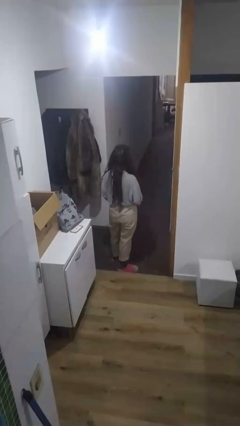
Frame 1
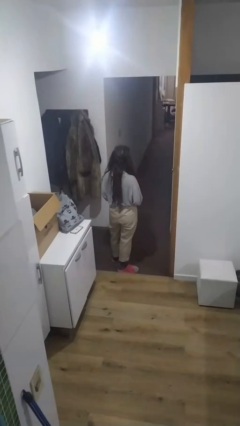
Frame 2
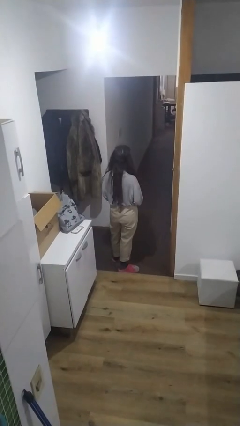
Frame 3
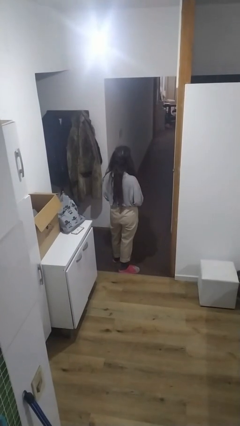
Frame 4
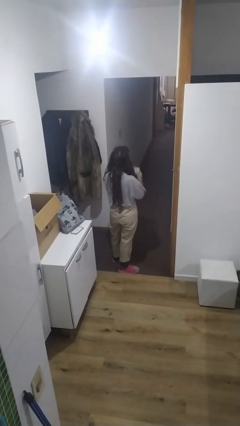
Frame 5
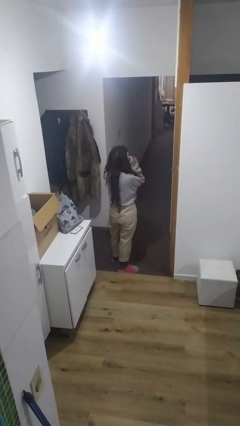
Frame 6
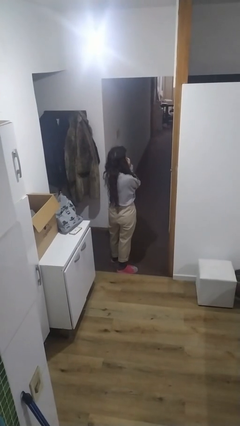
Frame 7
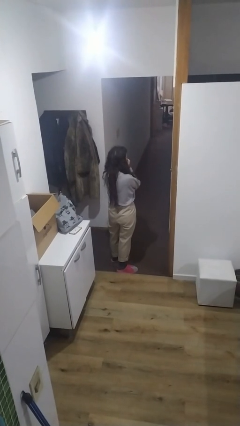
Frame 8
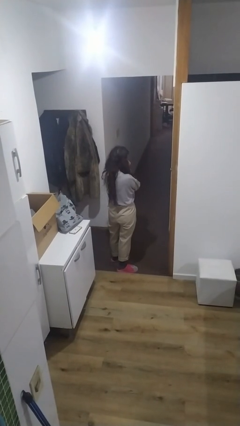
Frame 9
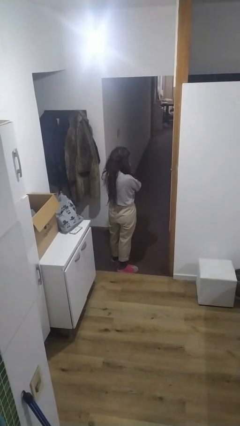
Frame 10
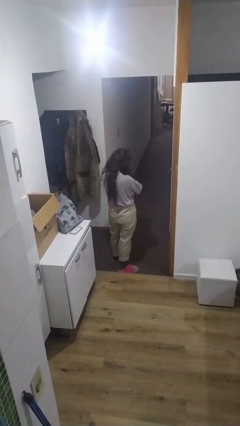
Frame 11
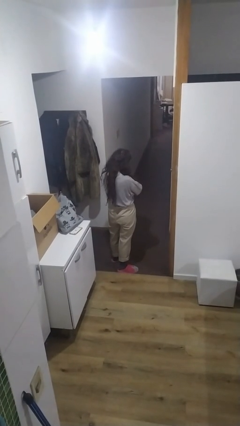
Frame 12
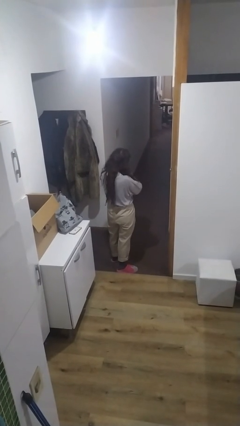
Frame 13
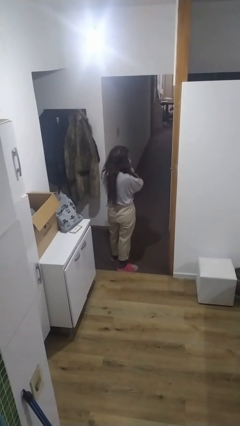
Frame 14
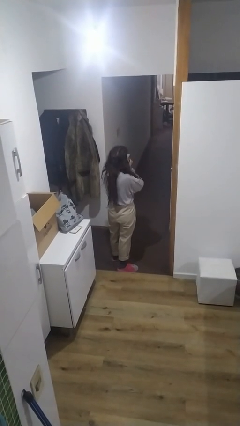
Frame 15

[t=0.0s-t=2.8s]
person blows nose

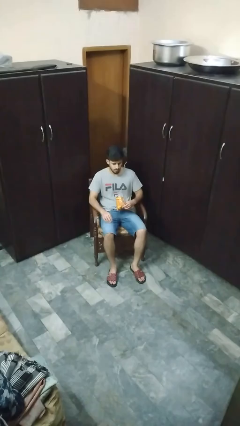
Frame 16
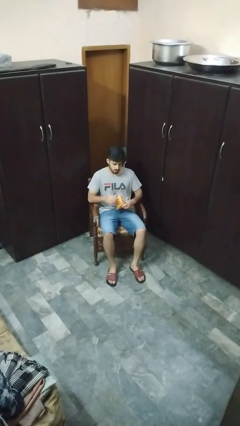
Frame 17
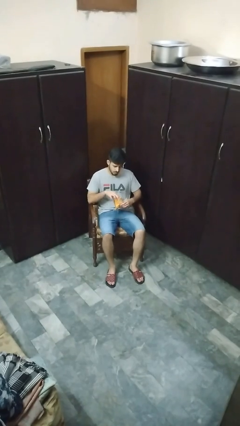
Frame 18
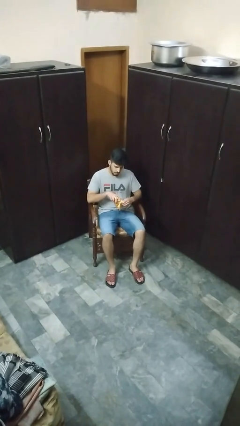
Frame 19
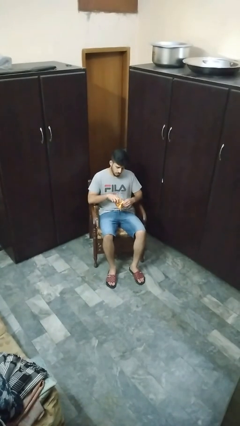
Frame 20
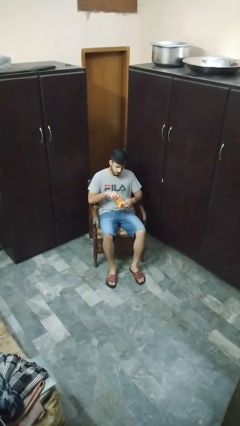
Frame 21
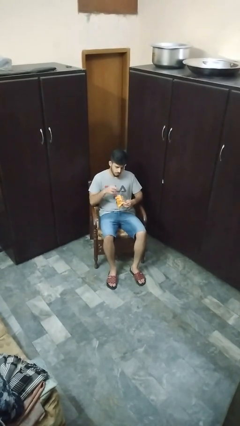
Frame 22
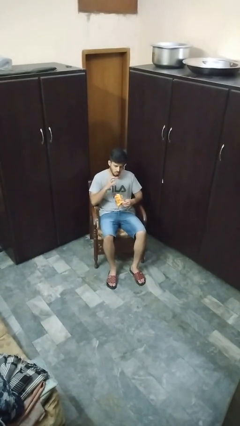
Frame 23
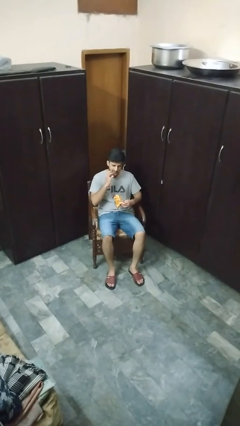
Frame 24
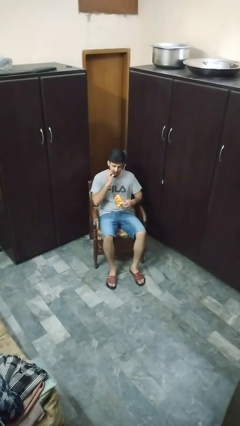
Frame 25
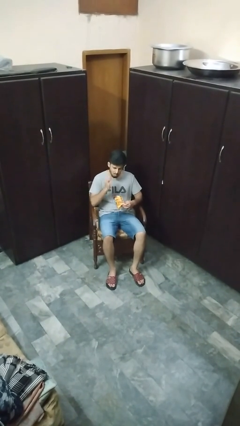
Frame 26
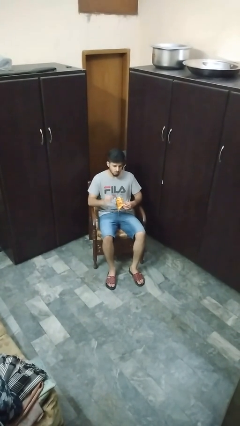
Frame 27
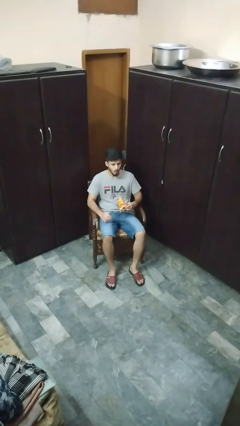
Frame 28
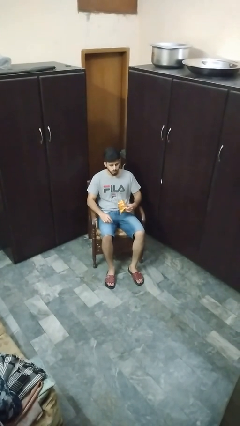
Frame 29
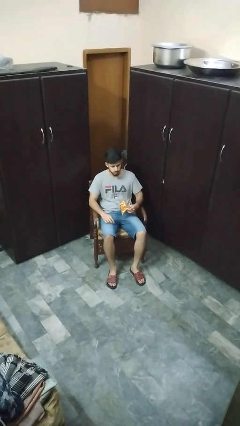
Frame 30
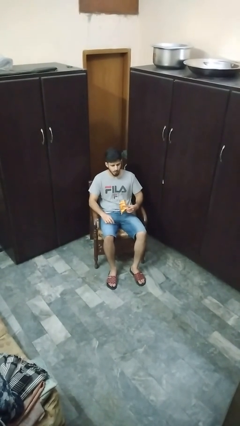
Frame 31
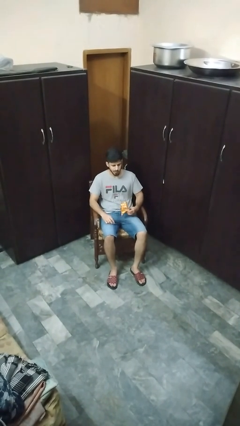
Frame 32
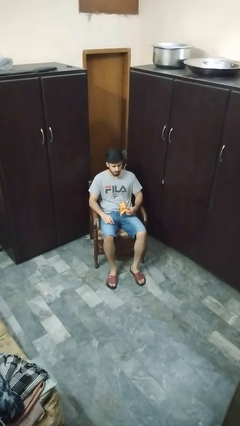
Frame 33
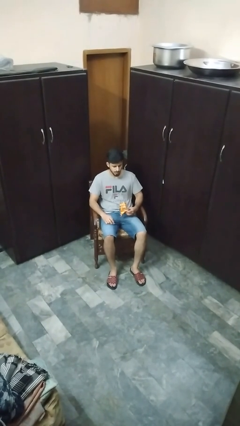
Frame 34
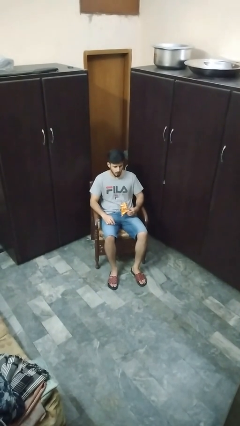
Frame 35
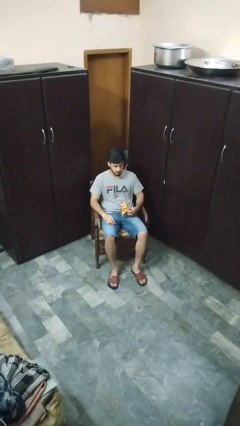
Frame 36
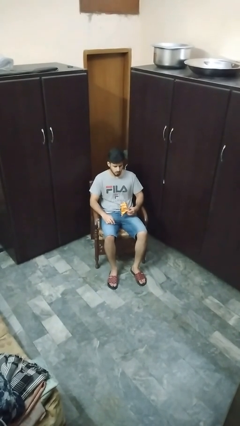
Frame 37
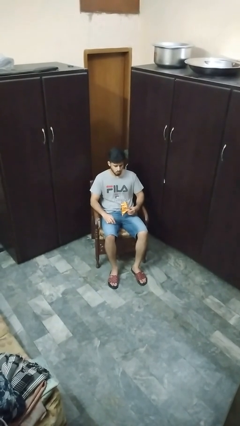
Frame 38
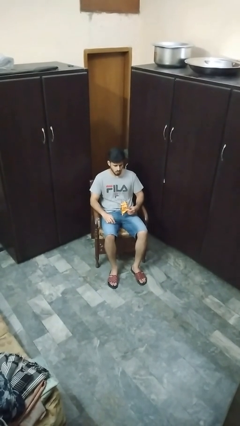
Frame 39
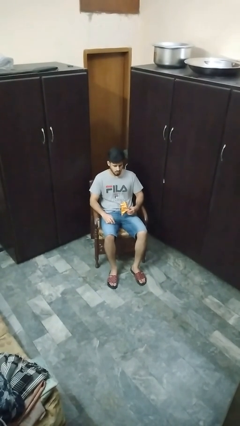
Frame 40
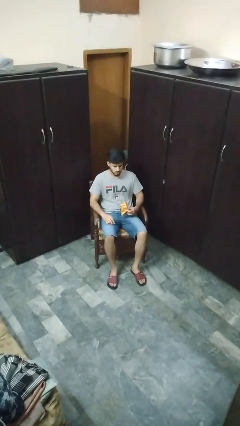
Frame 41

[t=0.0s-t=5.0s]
person eats snack from bag

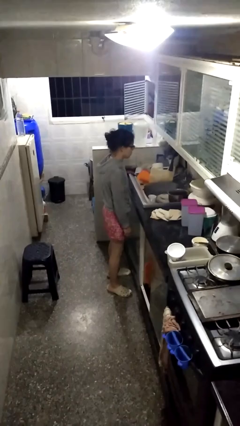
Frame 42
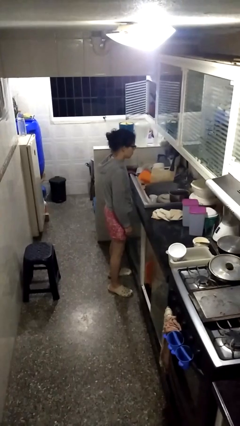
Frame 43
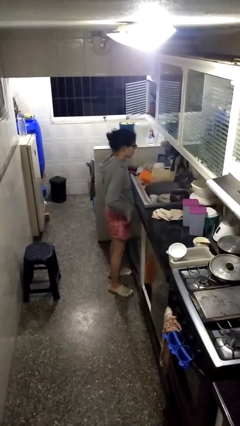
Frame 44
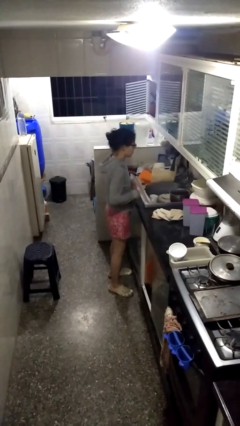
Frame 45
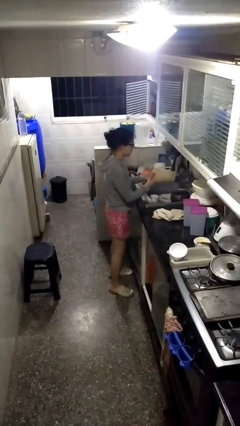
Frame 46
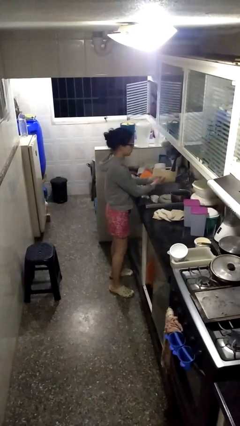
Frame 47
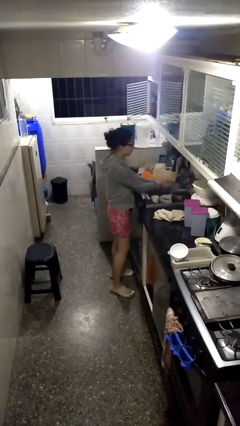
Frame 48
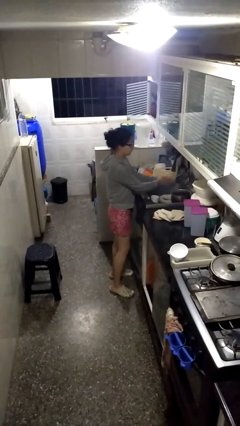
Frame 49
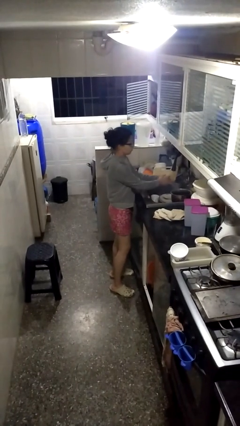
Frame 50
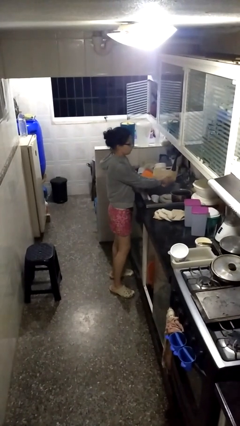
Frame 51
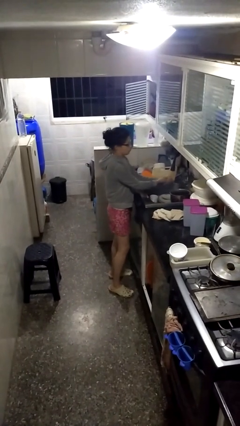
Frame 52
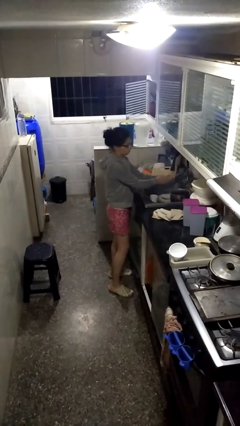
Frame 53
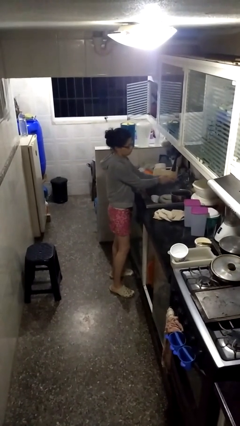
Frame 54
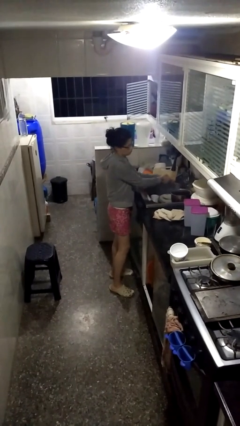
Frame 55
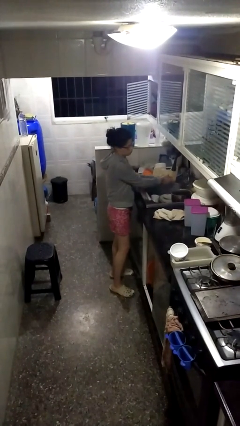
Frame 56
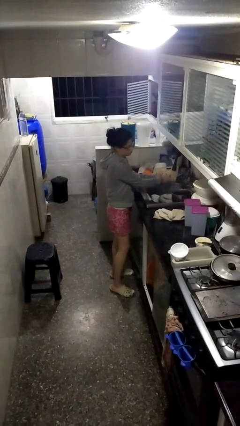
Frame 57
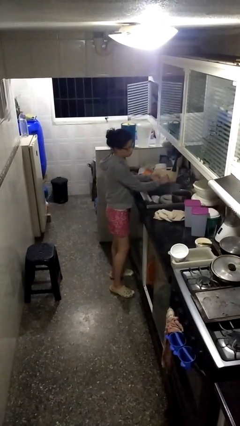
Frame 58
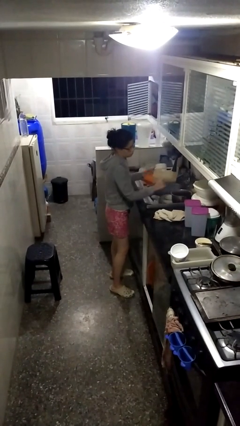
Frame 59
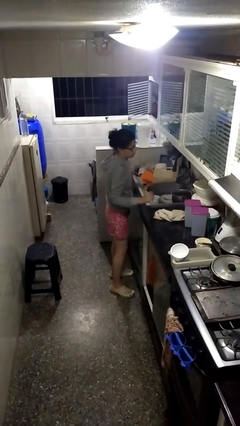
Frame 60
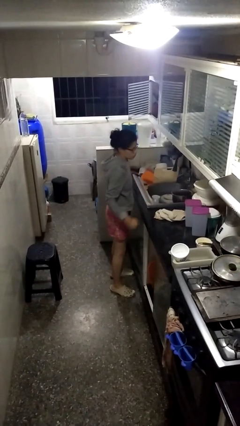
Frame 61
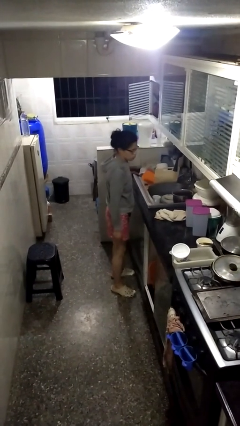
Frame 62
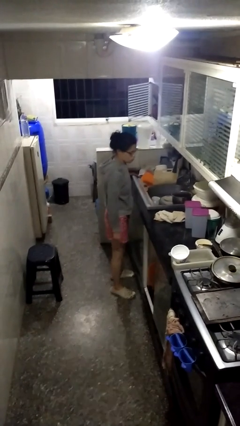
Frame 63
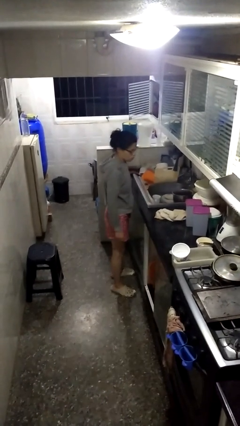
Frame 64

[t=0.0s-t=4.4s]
person washes hands

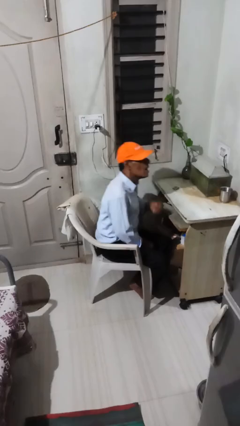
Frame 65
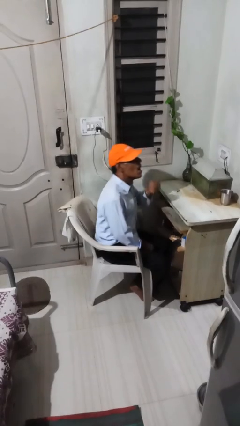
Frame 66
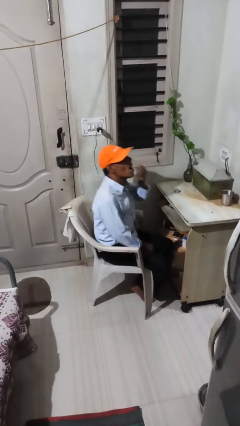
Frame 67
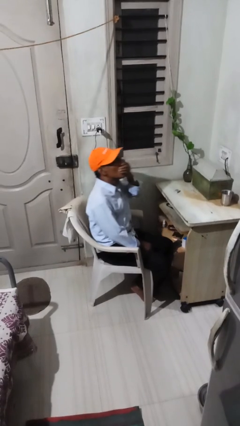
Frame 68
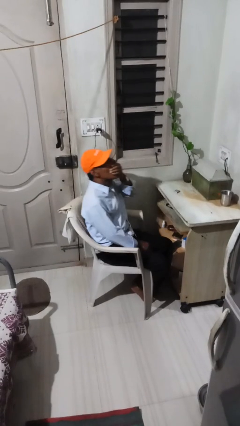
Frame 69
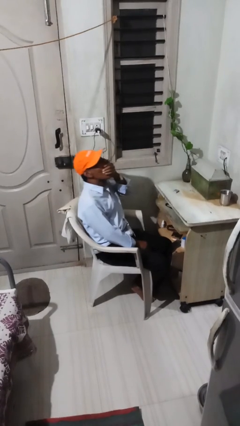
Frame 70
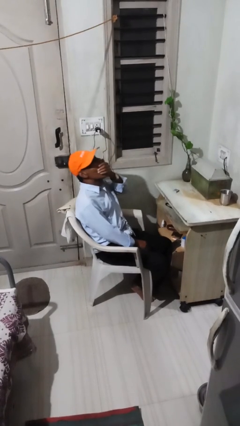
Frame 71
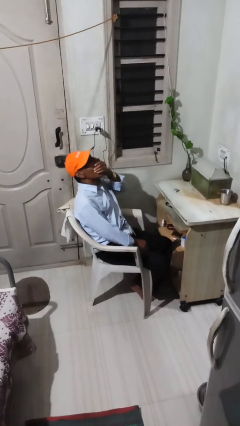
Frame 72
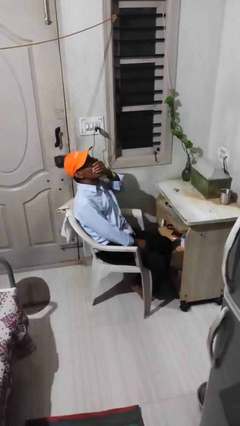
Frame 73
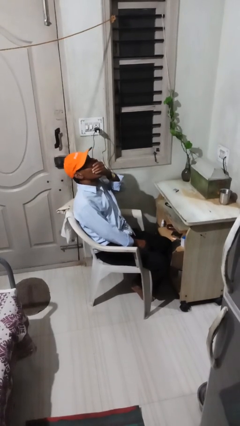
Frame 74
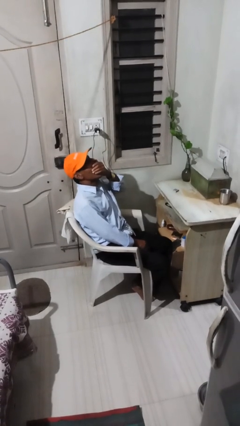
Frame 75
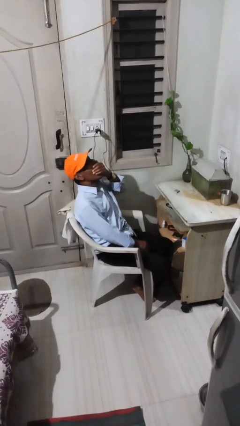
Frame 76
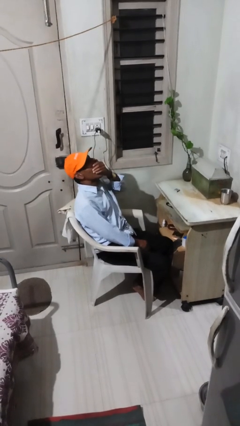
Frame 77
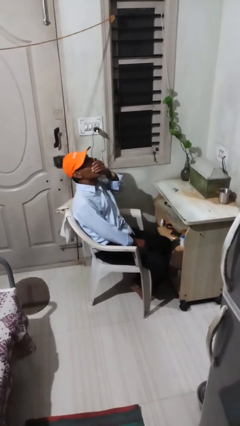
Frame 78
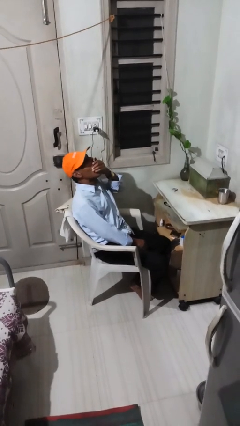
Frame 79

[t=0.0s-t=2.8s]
person yawns

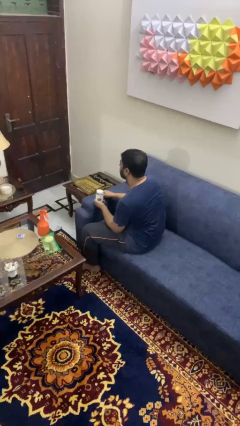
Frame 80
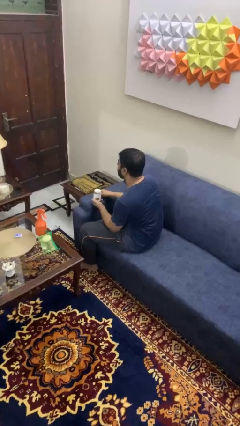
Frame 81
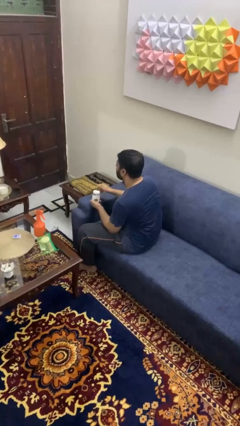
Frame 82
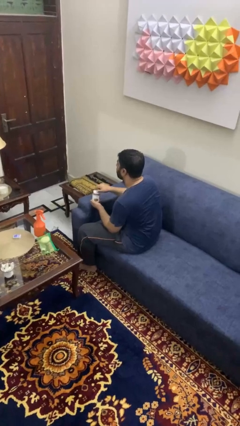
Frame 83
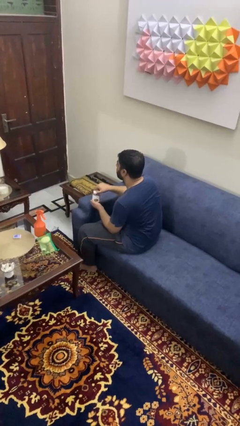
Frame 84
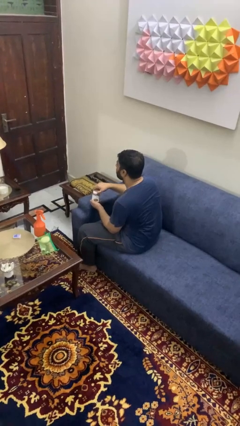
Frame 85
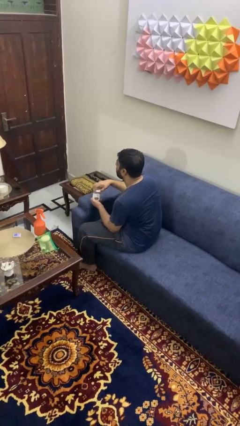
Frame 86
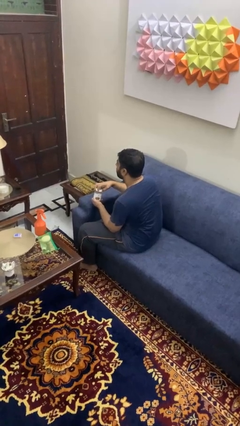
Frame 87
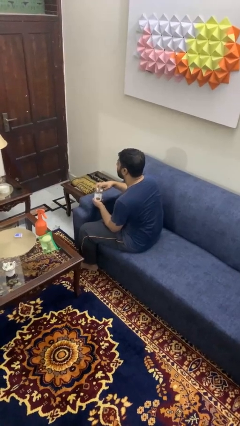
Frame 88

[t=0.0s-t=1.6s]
person opens jar

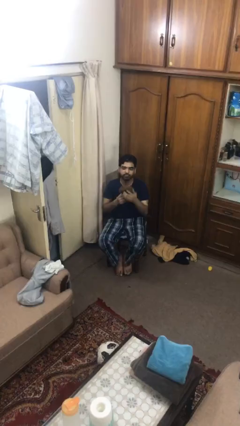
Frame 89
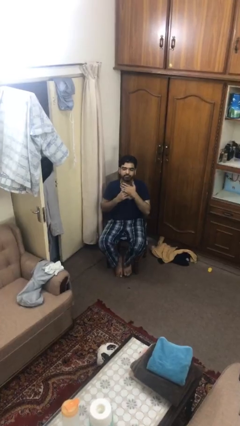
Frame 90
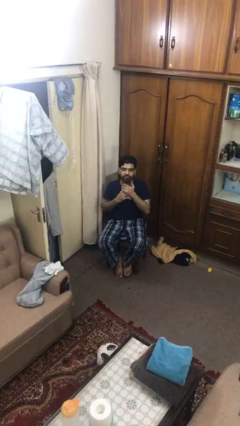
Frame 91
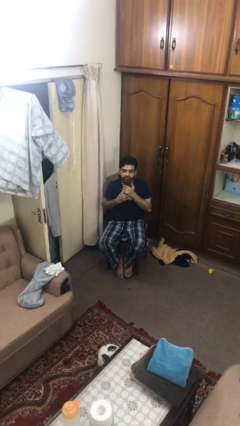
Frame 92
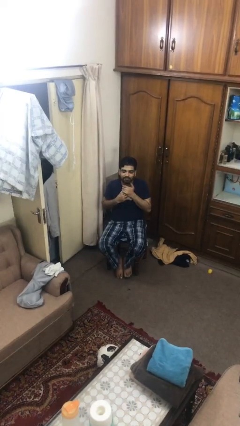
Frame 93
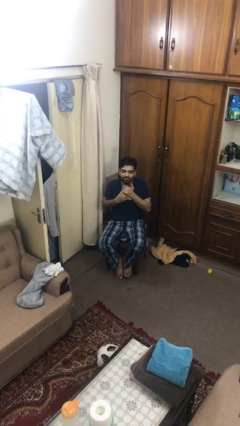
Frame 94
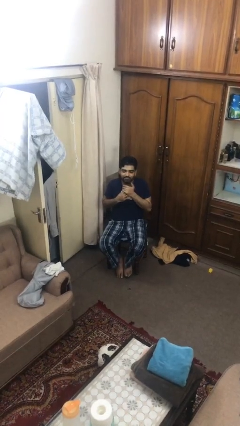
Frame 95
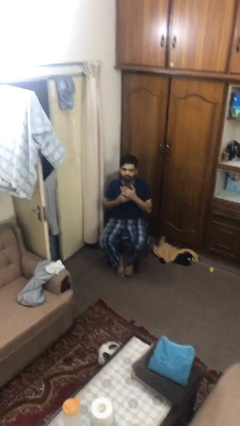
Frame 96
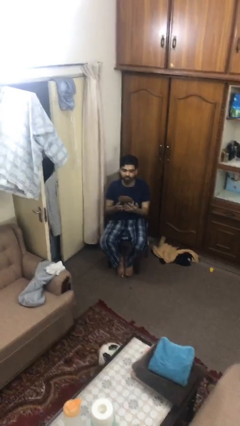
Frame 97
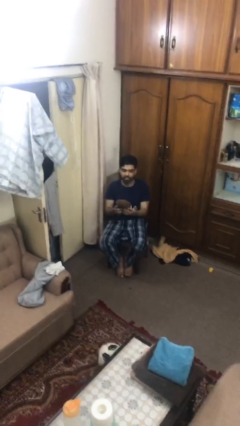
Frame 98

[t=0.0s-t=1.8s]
person hugs stuffed animal
